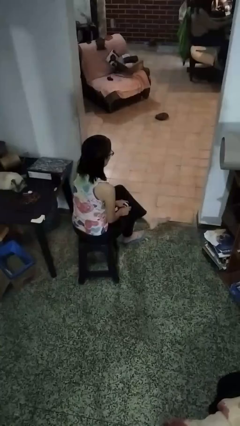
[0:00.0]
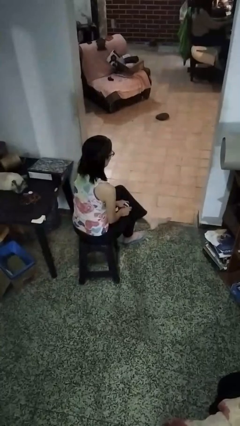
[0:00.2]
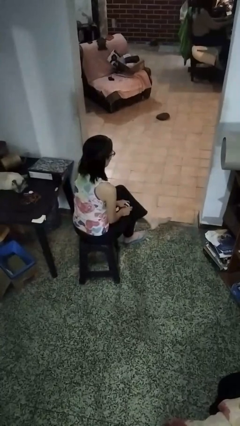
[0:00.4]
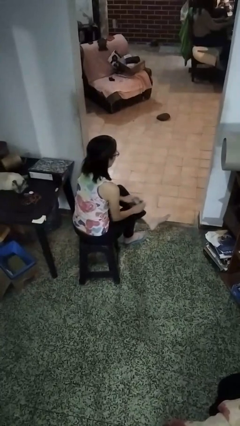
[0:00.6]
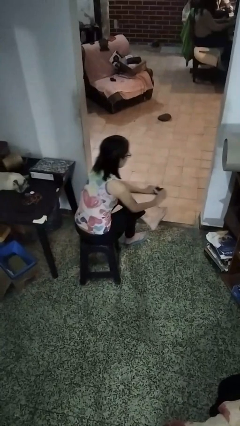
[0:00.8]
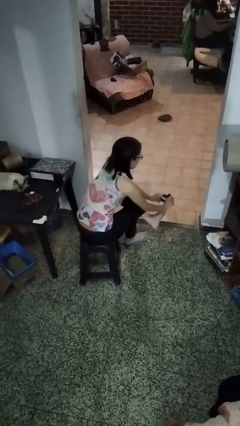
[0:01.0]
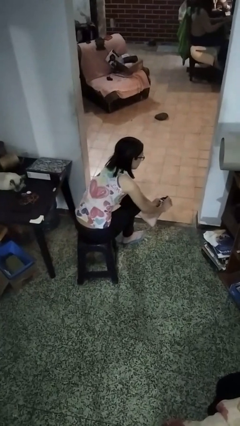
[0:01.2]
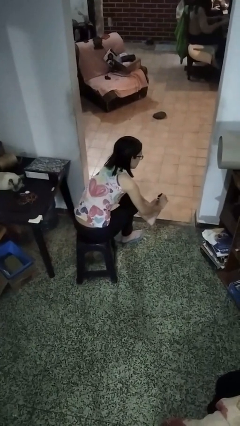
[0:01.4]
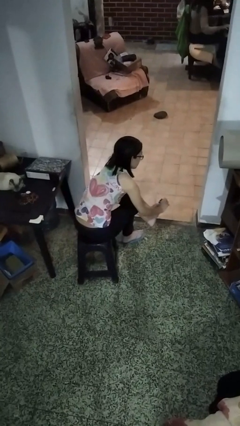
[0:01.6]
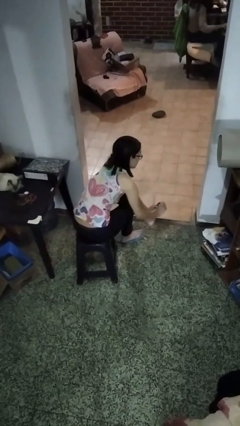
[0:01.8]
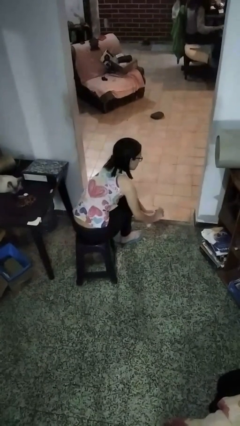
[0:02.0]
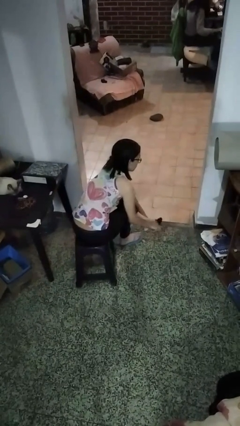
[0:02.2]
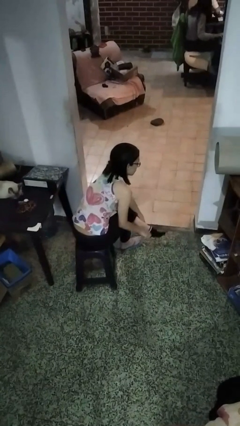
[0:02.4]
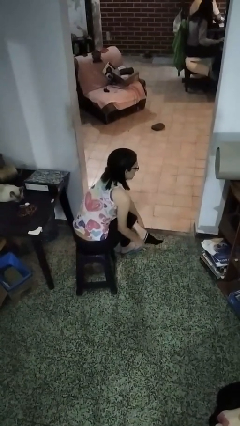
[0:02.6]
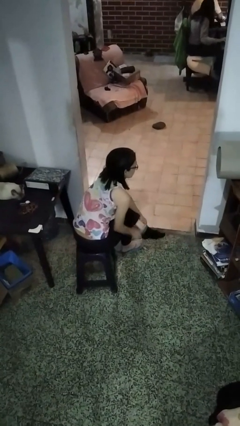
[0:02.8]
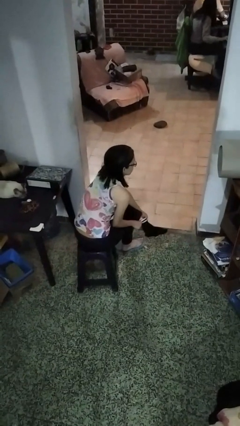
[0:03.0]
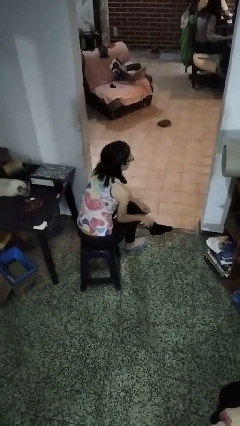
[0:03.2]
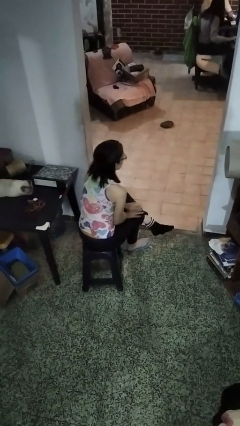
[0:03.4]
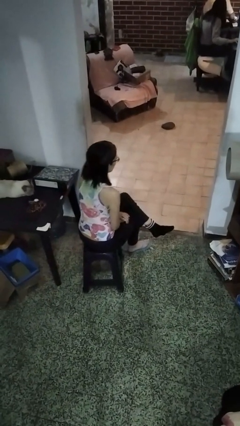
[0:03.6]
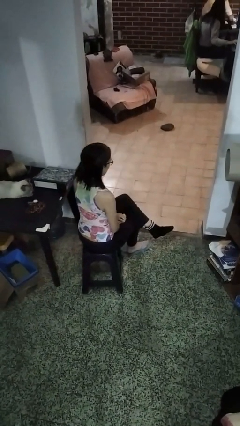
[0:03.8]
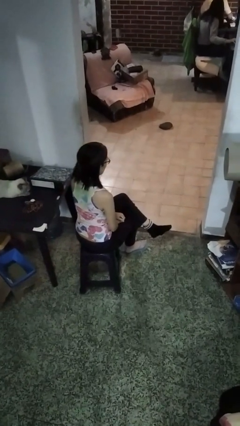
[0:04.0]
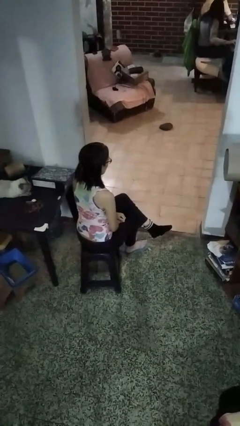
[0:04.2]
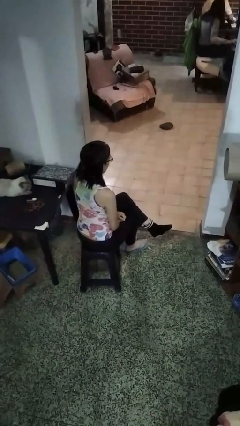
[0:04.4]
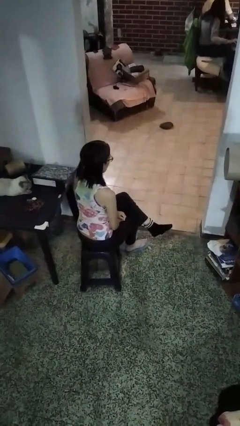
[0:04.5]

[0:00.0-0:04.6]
person puts on socks

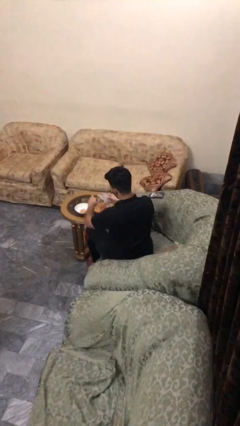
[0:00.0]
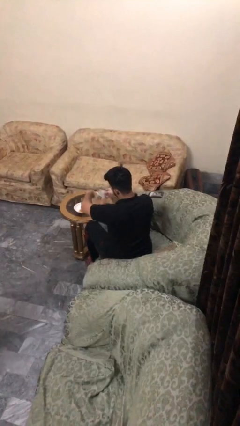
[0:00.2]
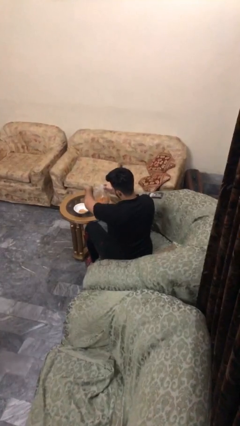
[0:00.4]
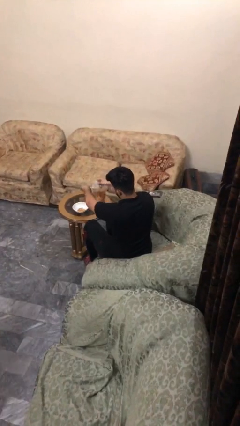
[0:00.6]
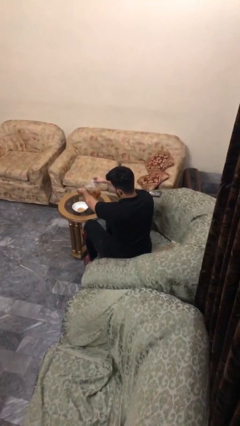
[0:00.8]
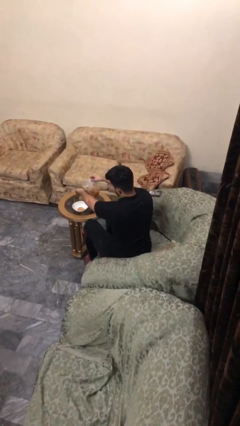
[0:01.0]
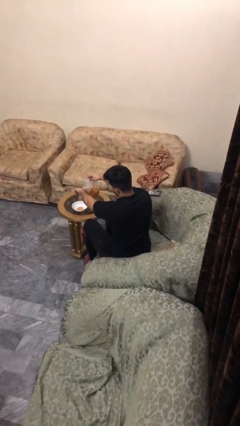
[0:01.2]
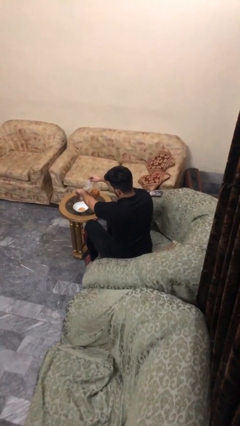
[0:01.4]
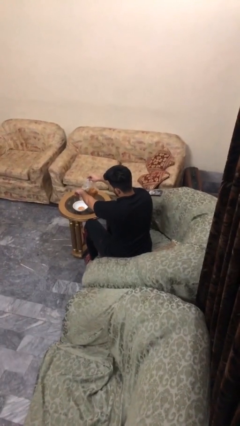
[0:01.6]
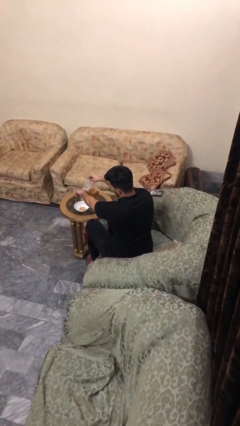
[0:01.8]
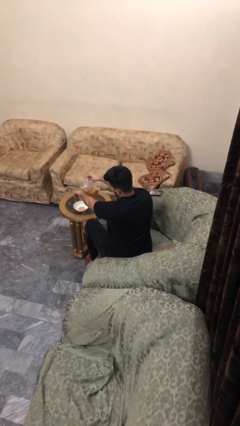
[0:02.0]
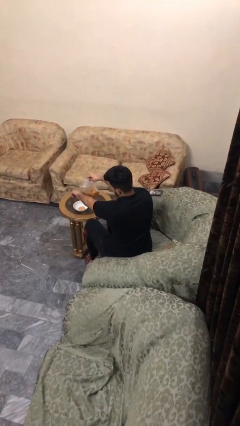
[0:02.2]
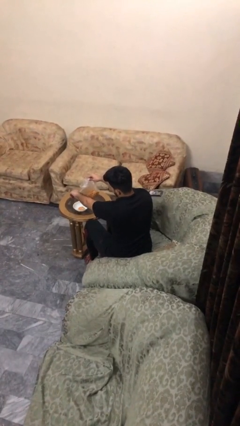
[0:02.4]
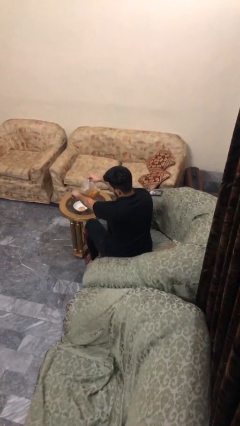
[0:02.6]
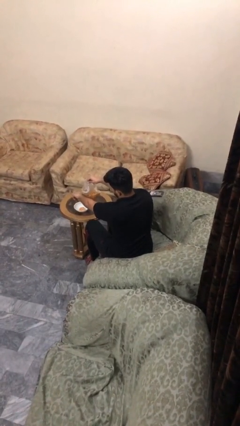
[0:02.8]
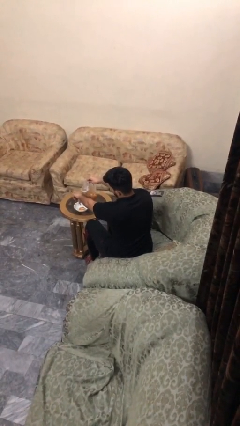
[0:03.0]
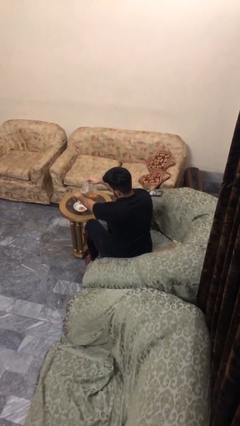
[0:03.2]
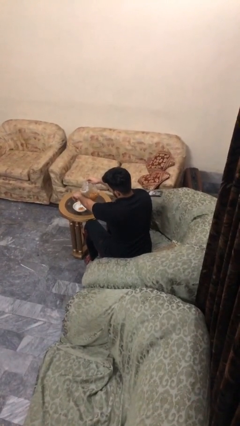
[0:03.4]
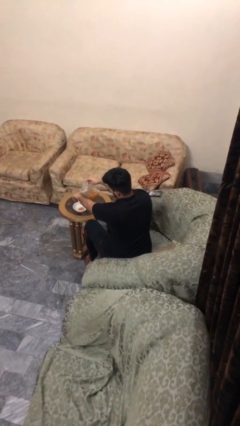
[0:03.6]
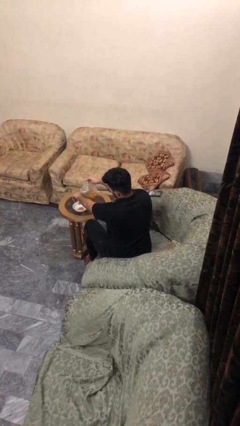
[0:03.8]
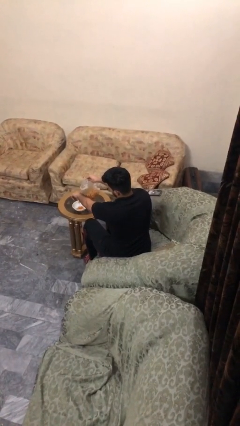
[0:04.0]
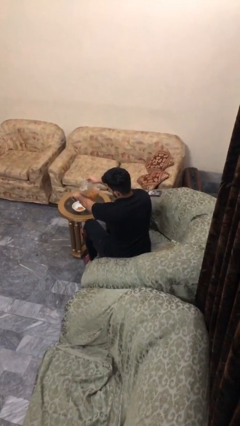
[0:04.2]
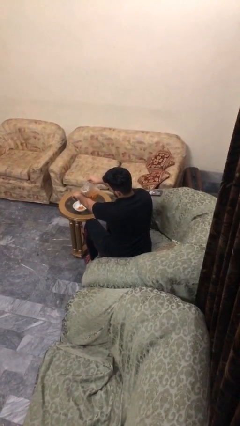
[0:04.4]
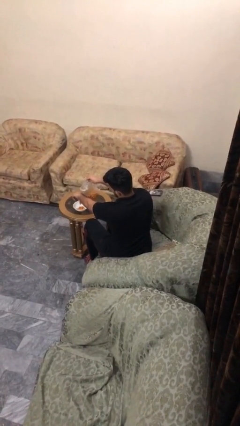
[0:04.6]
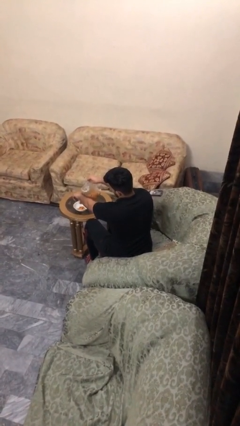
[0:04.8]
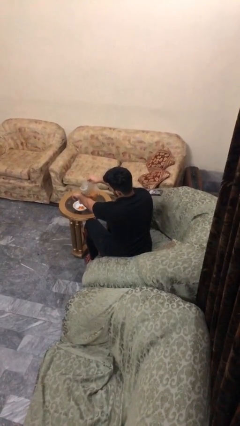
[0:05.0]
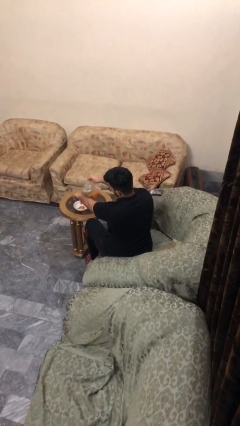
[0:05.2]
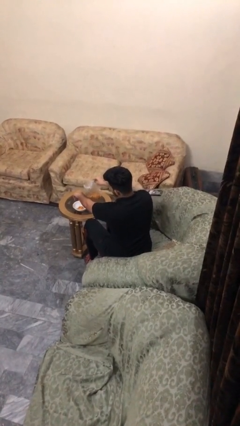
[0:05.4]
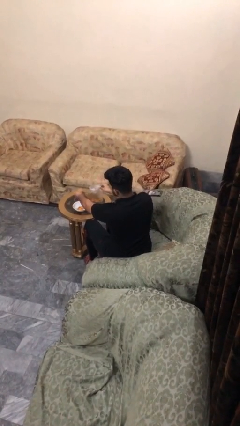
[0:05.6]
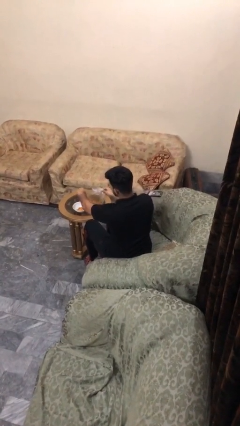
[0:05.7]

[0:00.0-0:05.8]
person pours into bowl

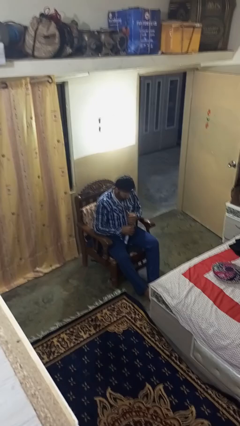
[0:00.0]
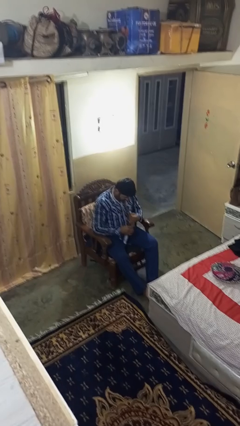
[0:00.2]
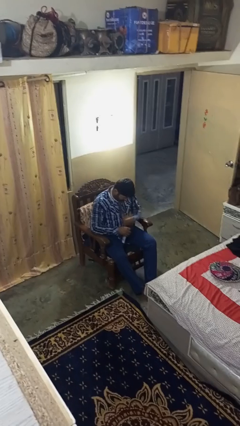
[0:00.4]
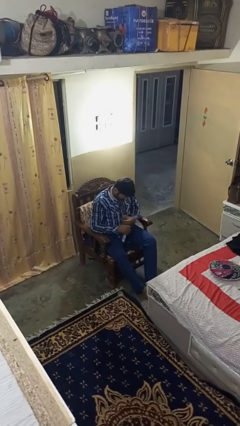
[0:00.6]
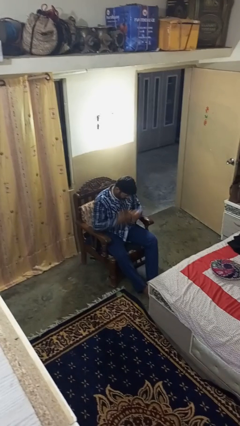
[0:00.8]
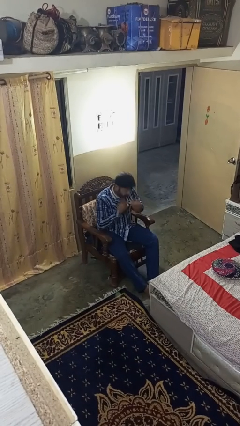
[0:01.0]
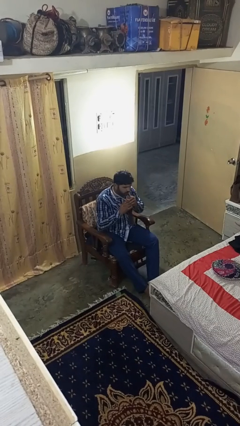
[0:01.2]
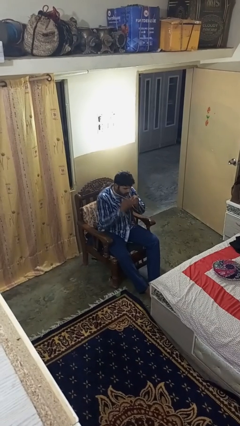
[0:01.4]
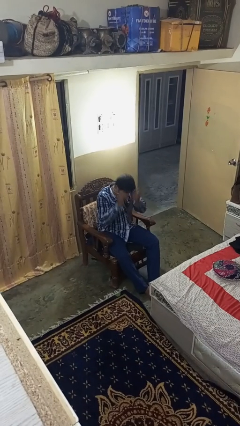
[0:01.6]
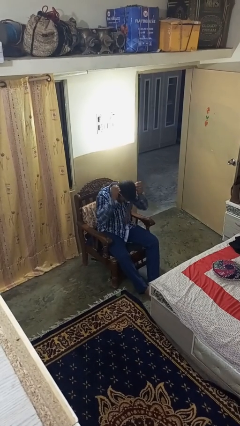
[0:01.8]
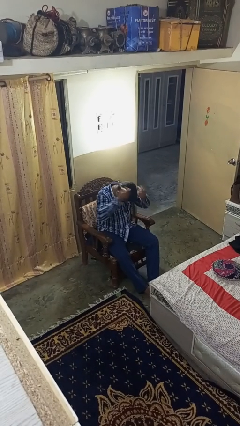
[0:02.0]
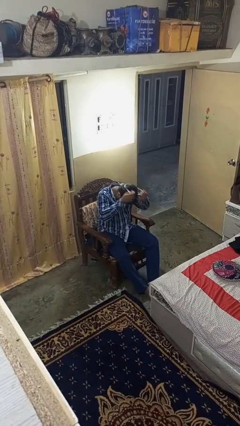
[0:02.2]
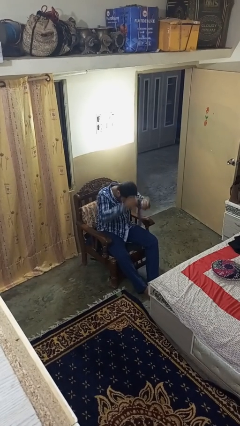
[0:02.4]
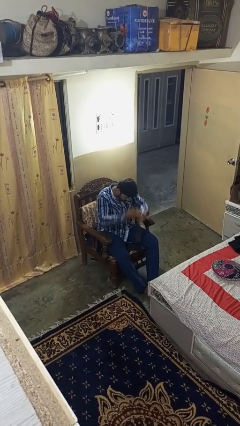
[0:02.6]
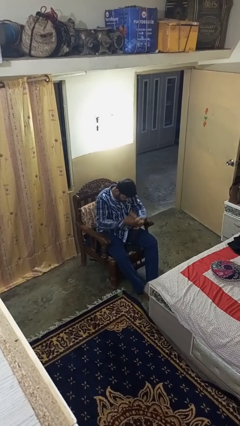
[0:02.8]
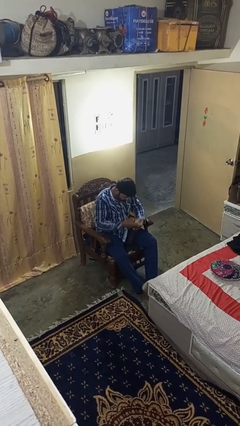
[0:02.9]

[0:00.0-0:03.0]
person takes off necktie

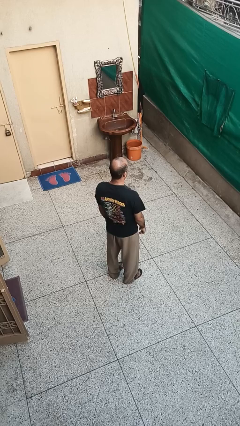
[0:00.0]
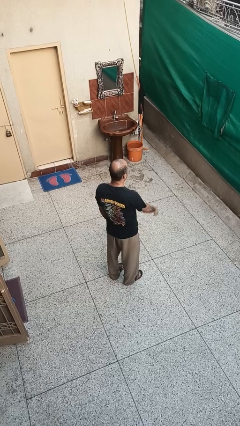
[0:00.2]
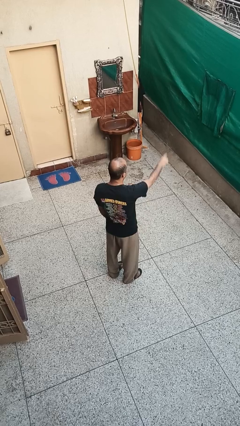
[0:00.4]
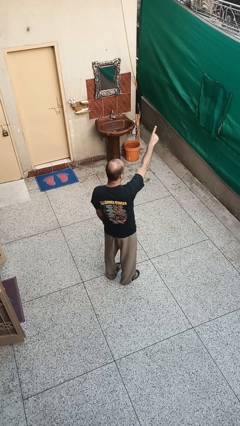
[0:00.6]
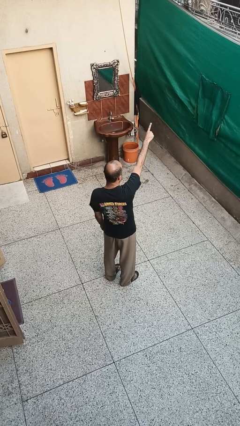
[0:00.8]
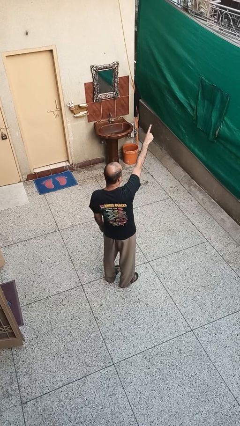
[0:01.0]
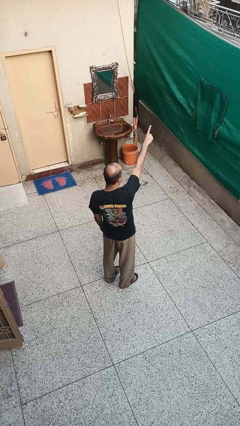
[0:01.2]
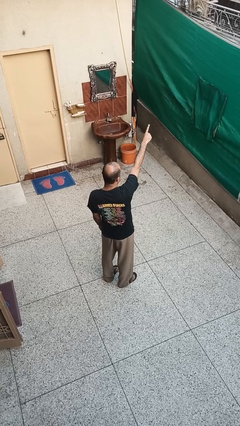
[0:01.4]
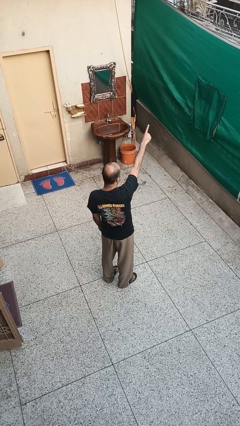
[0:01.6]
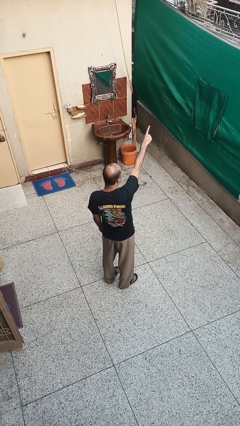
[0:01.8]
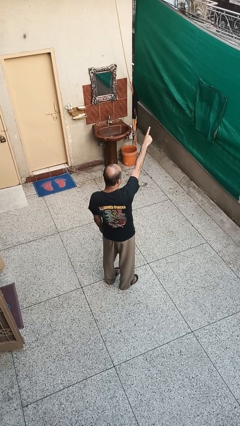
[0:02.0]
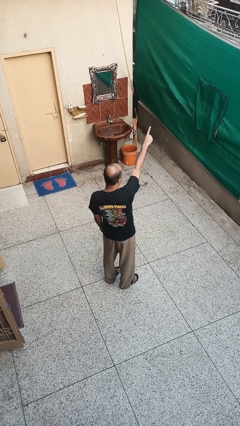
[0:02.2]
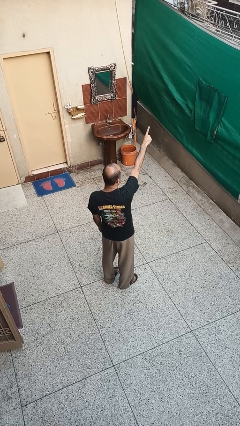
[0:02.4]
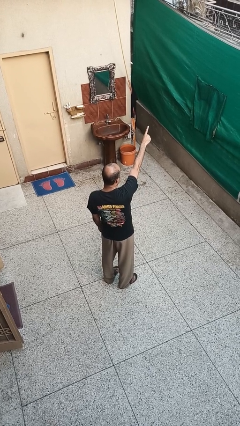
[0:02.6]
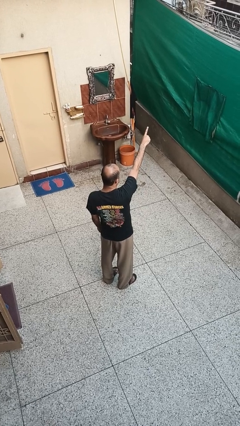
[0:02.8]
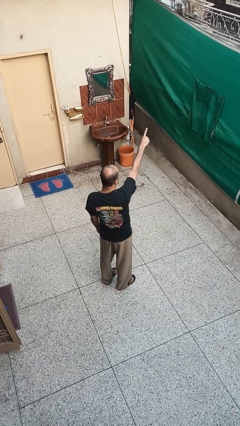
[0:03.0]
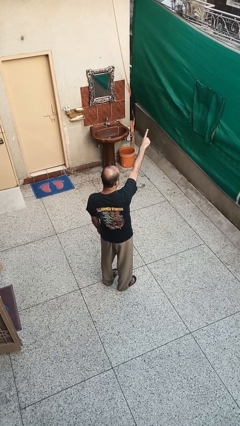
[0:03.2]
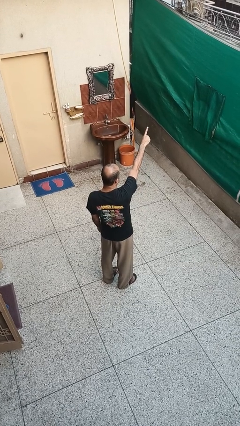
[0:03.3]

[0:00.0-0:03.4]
person points at person

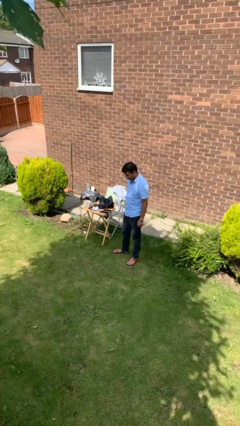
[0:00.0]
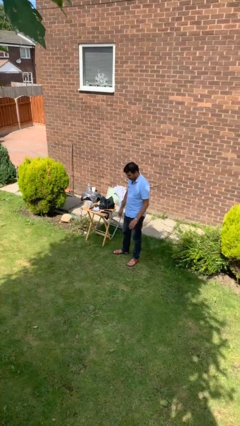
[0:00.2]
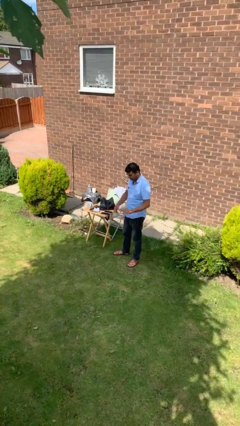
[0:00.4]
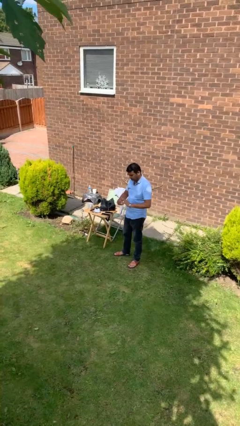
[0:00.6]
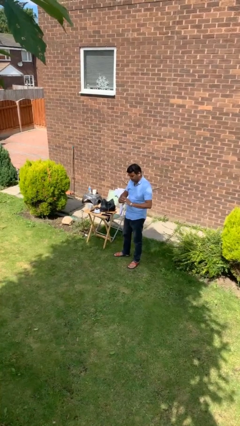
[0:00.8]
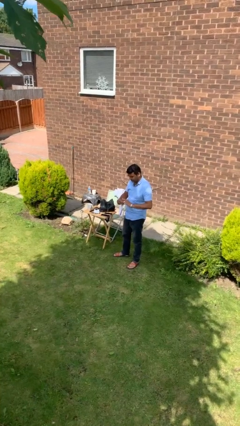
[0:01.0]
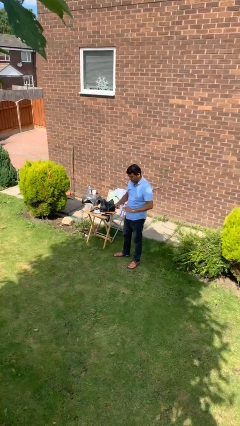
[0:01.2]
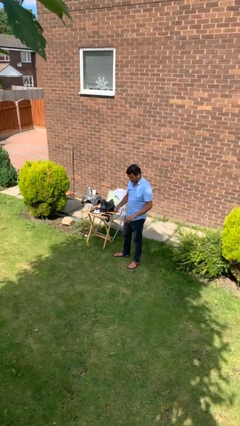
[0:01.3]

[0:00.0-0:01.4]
person takes off ring
